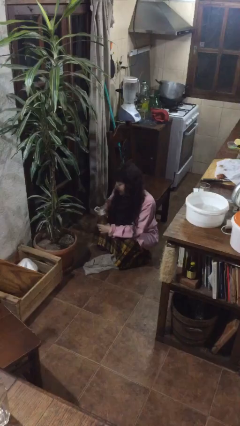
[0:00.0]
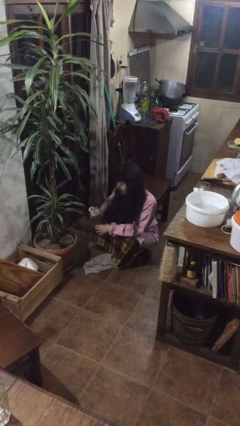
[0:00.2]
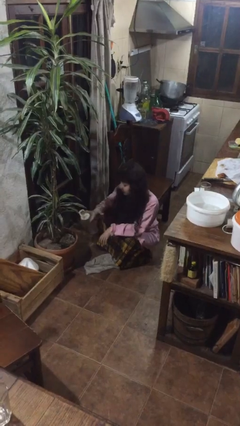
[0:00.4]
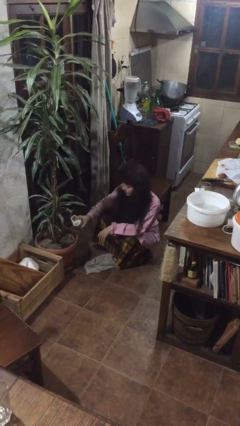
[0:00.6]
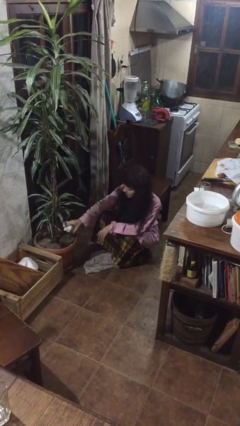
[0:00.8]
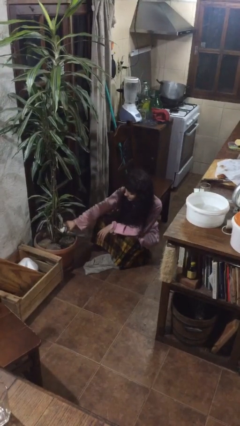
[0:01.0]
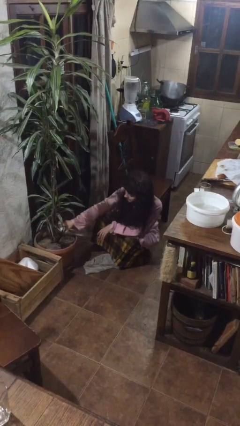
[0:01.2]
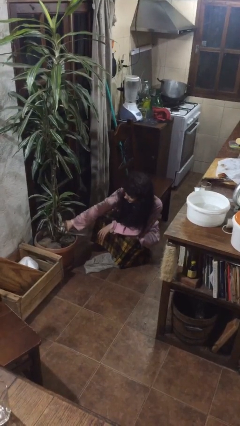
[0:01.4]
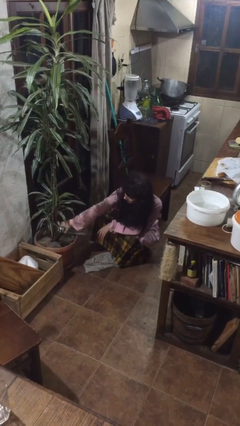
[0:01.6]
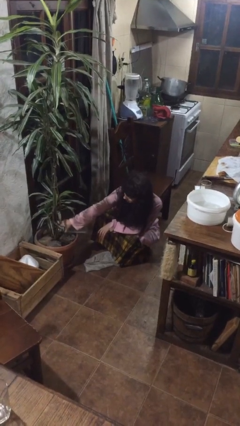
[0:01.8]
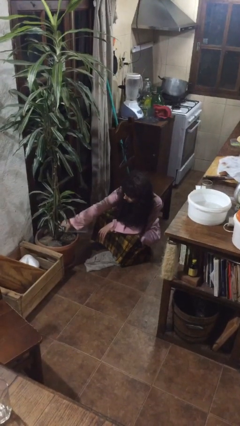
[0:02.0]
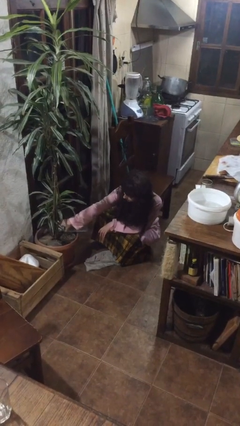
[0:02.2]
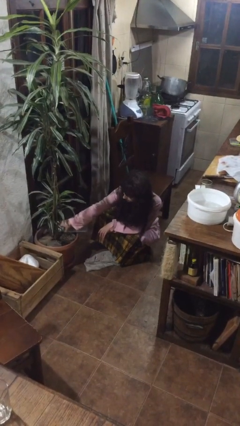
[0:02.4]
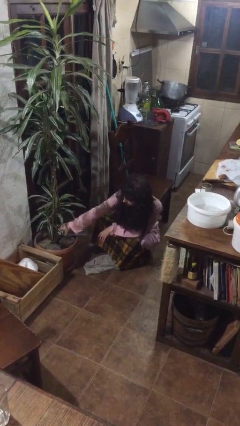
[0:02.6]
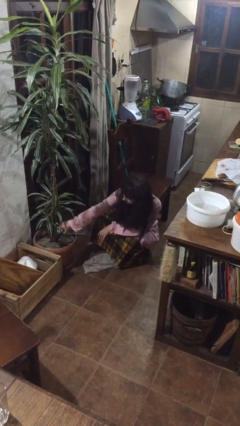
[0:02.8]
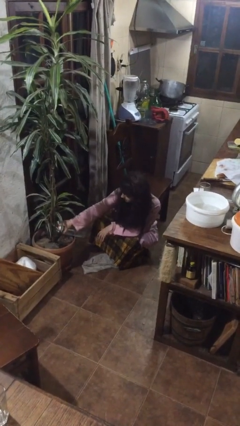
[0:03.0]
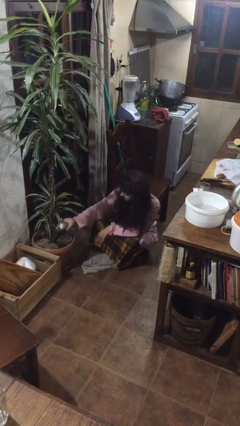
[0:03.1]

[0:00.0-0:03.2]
person waters houseplant

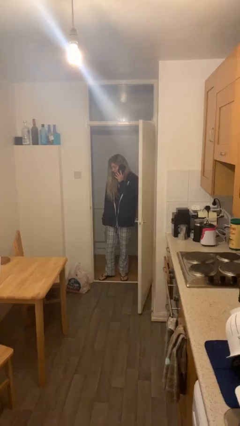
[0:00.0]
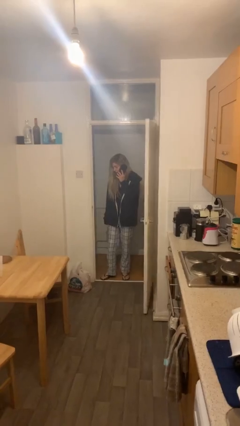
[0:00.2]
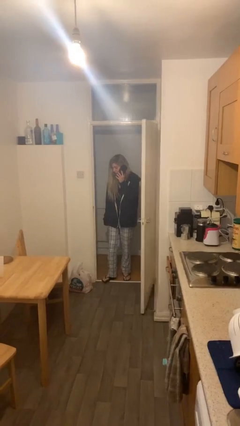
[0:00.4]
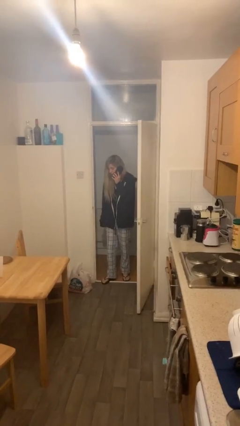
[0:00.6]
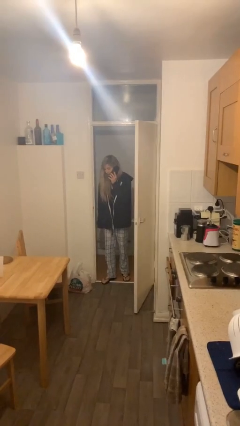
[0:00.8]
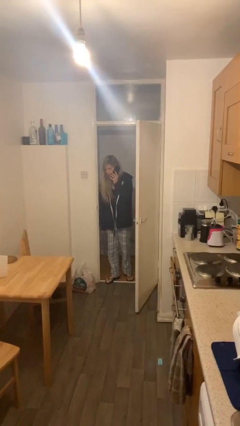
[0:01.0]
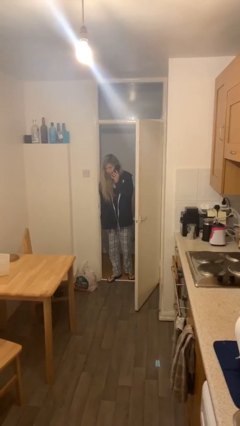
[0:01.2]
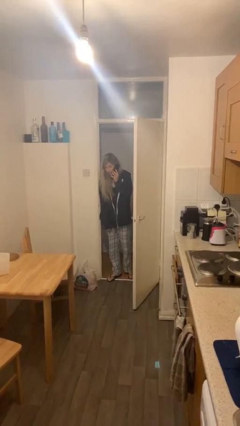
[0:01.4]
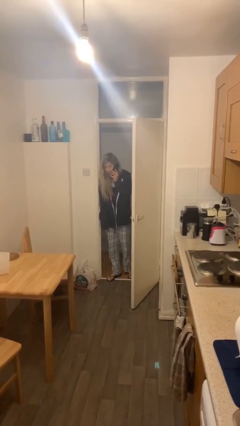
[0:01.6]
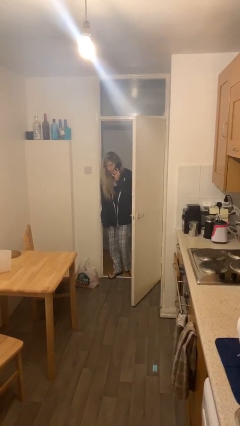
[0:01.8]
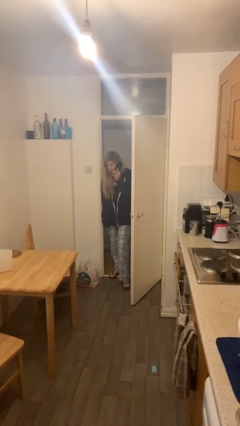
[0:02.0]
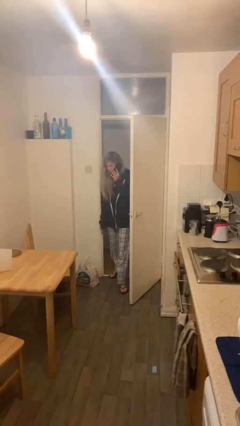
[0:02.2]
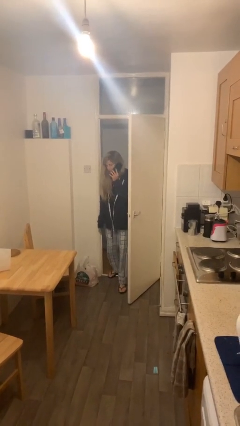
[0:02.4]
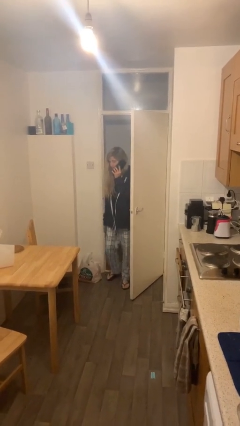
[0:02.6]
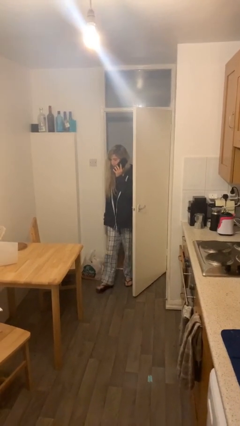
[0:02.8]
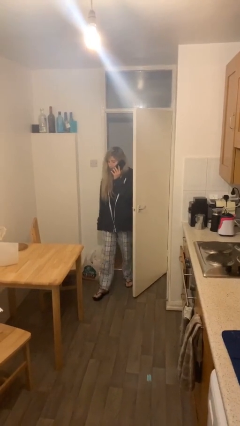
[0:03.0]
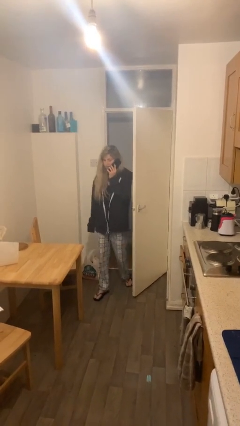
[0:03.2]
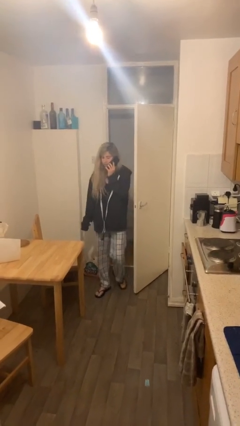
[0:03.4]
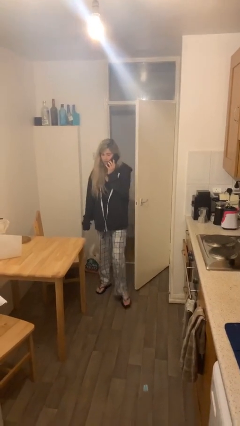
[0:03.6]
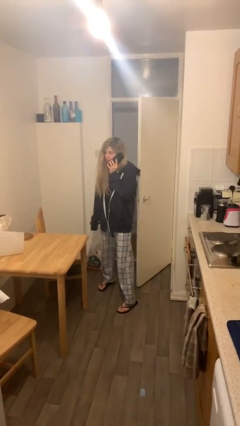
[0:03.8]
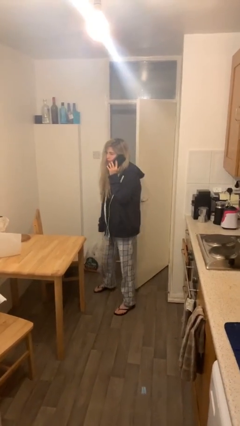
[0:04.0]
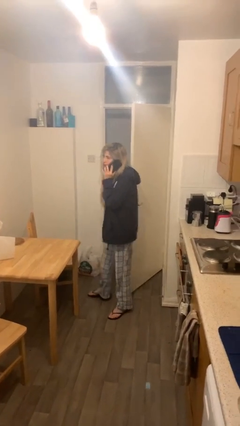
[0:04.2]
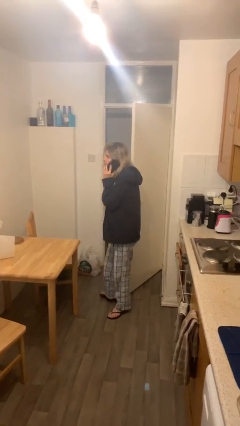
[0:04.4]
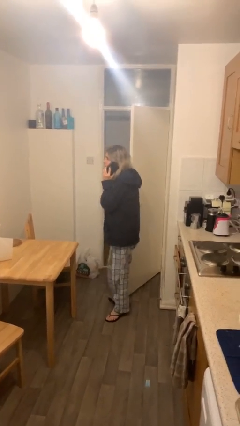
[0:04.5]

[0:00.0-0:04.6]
person enters scene through structure

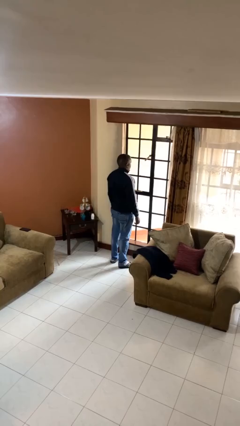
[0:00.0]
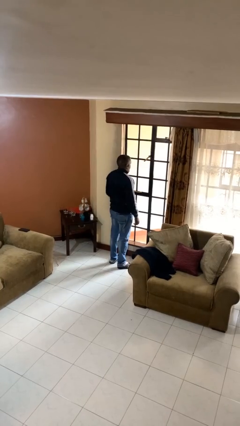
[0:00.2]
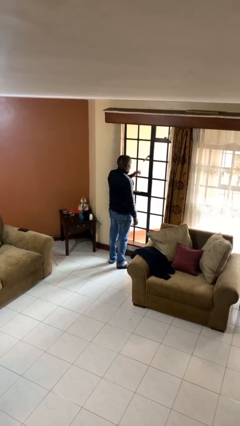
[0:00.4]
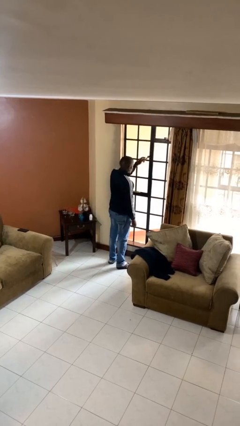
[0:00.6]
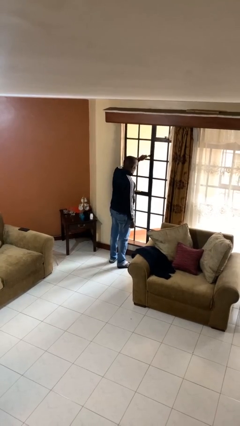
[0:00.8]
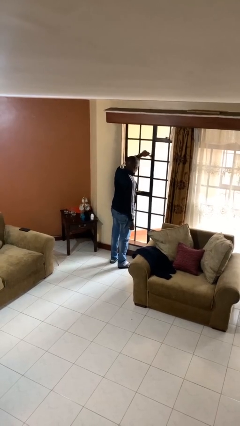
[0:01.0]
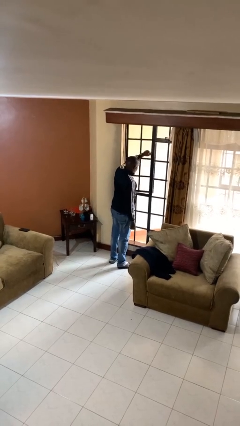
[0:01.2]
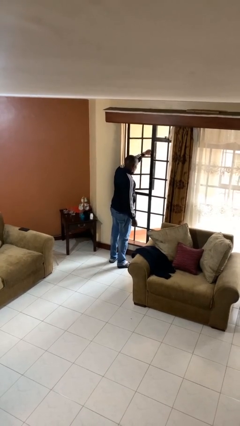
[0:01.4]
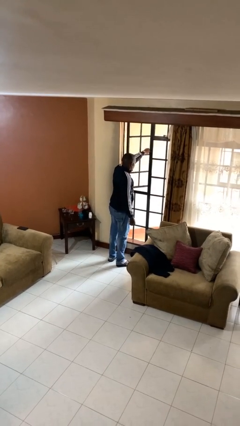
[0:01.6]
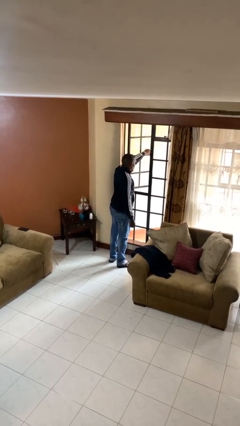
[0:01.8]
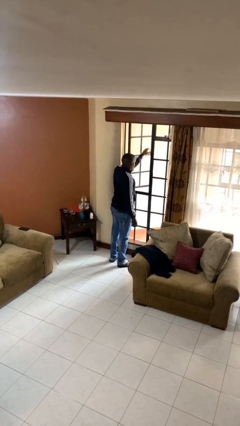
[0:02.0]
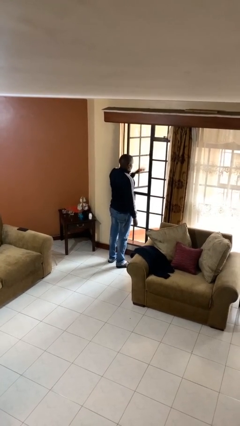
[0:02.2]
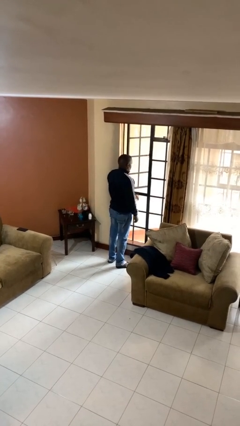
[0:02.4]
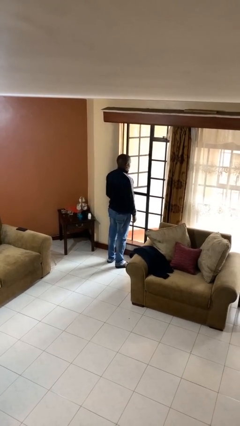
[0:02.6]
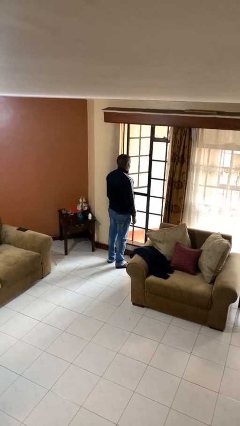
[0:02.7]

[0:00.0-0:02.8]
person opens home window

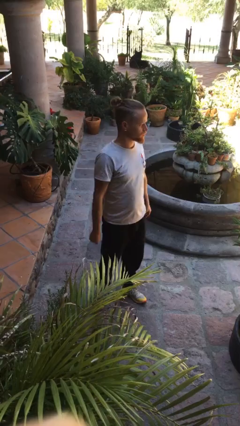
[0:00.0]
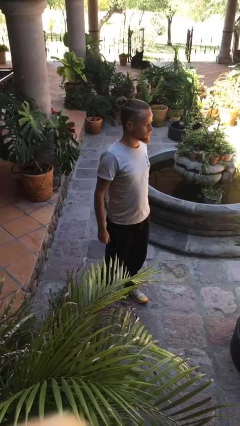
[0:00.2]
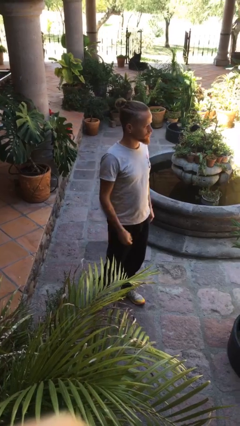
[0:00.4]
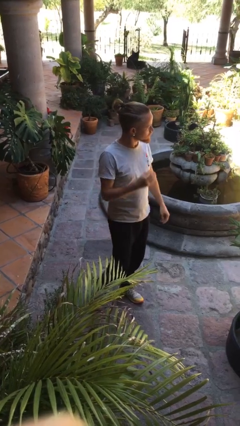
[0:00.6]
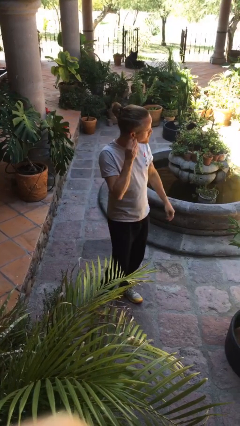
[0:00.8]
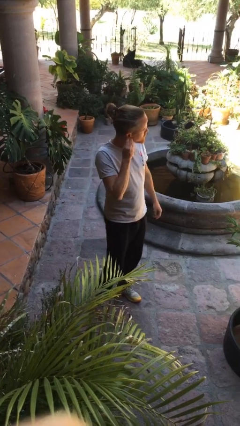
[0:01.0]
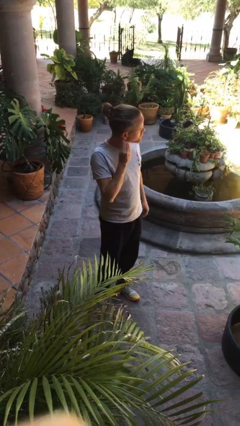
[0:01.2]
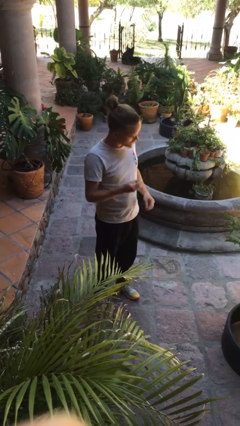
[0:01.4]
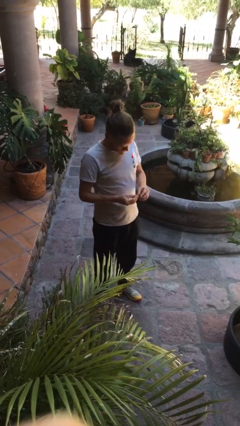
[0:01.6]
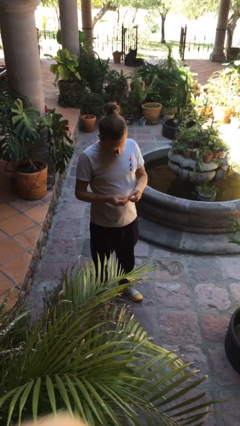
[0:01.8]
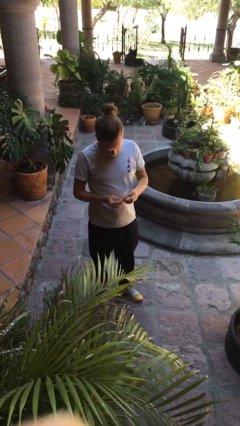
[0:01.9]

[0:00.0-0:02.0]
person takes off earrings

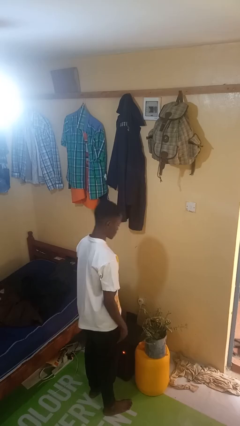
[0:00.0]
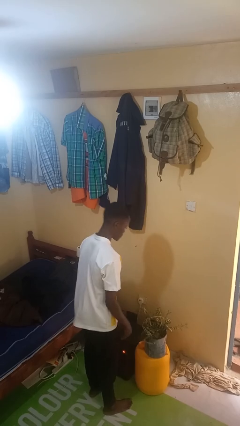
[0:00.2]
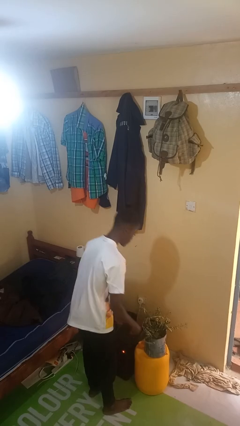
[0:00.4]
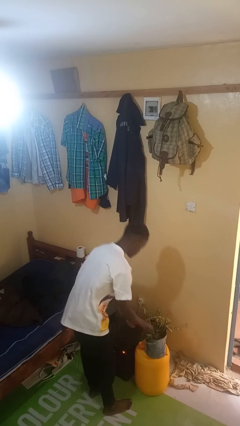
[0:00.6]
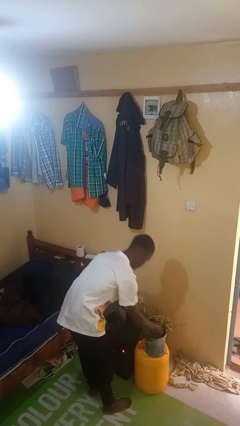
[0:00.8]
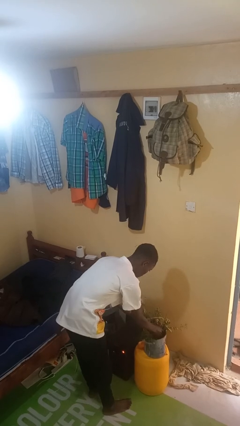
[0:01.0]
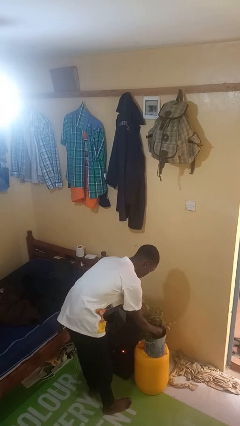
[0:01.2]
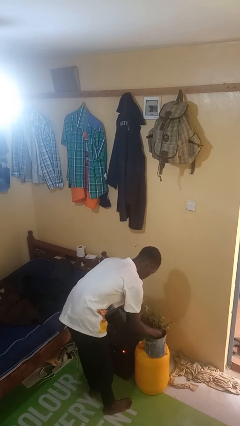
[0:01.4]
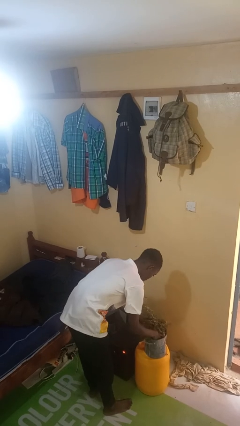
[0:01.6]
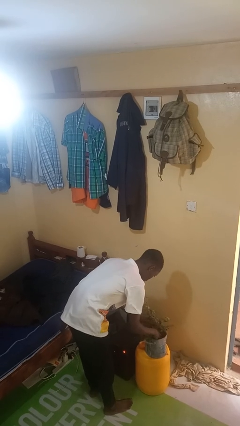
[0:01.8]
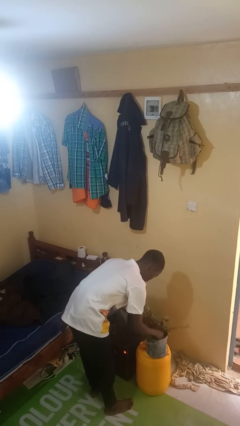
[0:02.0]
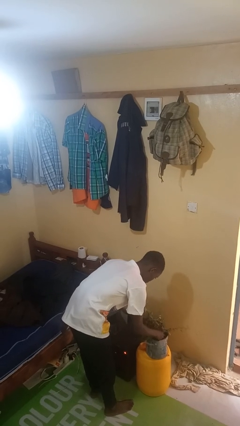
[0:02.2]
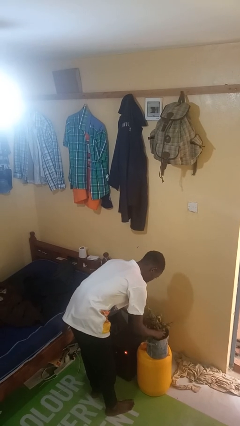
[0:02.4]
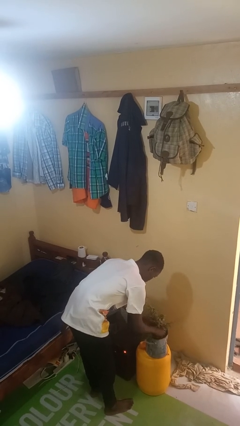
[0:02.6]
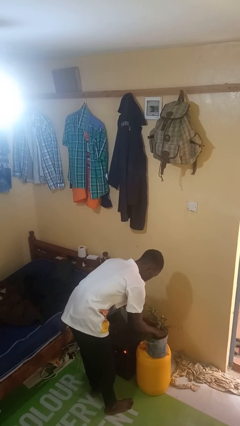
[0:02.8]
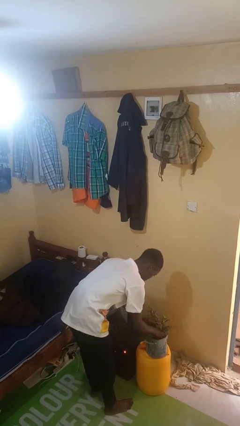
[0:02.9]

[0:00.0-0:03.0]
person arranges flowers in vase

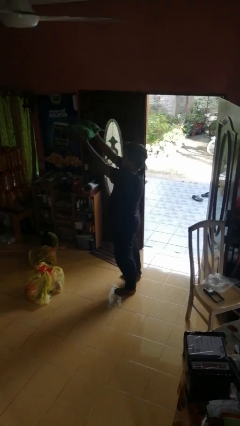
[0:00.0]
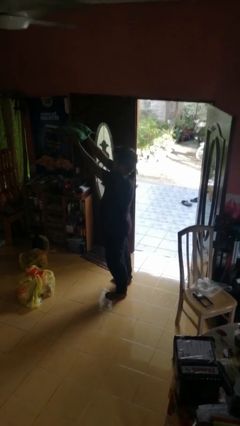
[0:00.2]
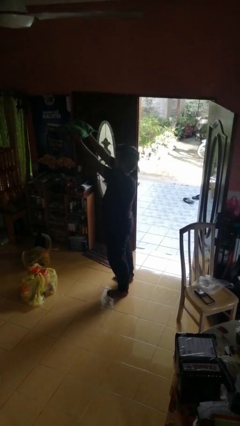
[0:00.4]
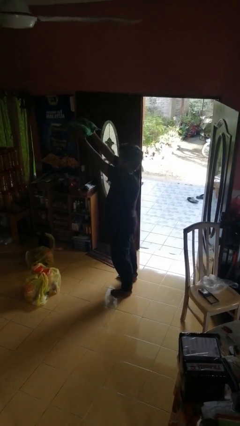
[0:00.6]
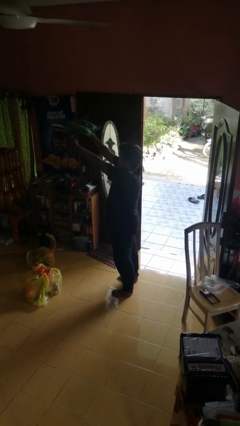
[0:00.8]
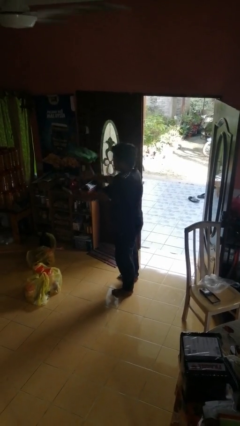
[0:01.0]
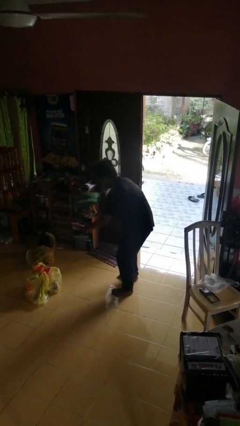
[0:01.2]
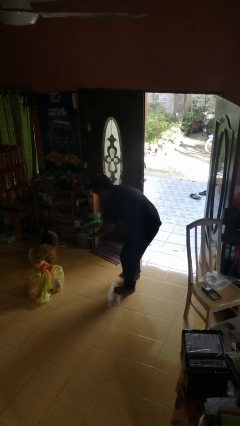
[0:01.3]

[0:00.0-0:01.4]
person drops object

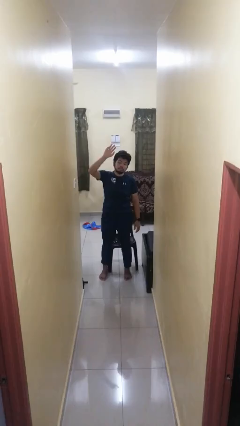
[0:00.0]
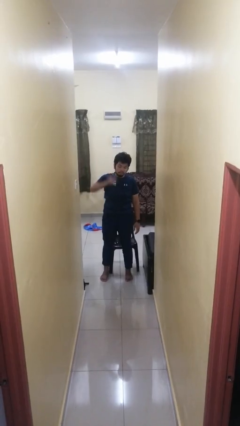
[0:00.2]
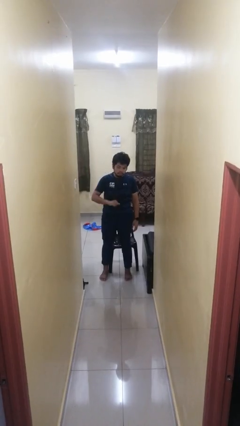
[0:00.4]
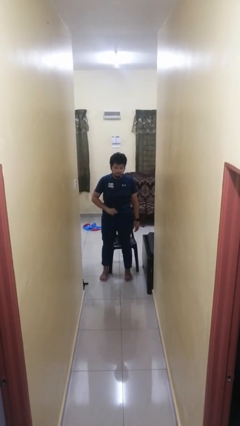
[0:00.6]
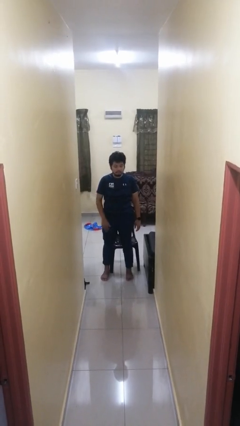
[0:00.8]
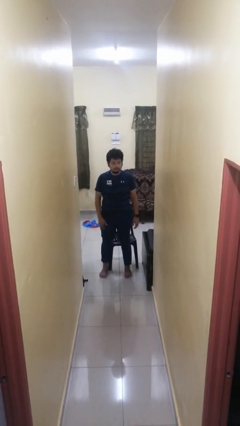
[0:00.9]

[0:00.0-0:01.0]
person gestures swipe down
